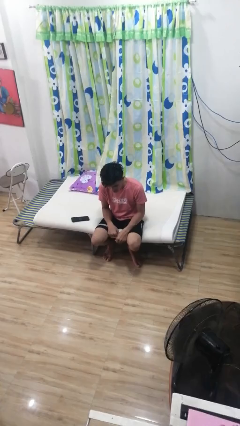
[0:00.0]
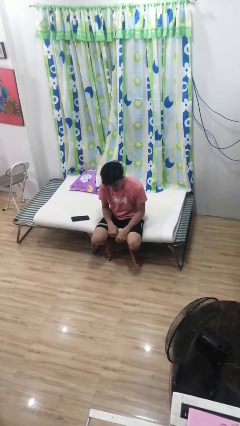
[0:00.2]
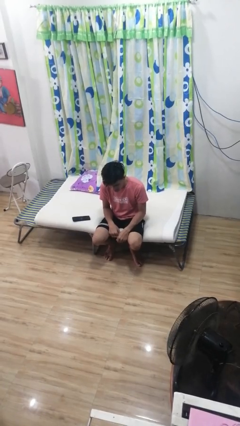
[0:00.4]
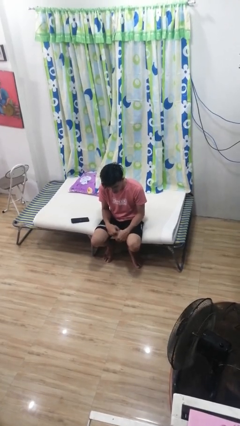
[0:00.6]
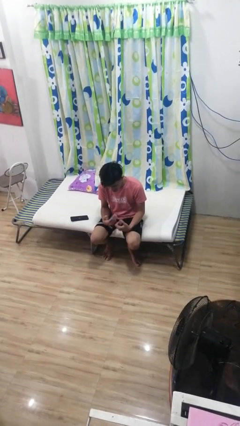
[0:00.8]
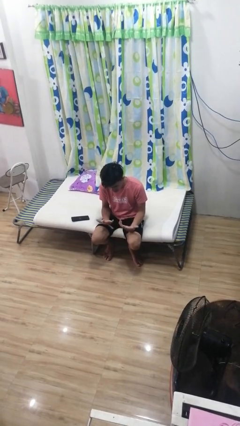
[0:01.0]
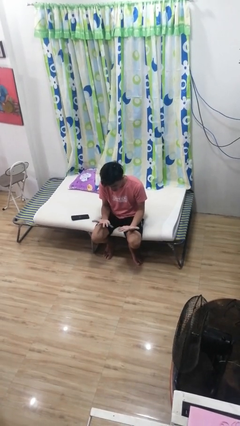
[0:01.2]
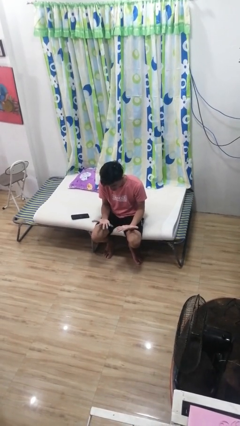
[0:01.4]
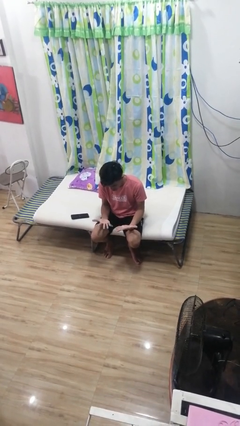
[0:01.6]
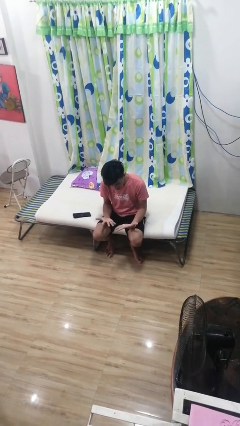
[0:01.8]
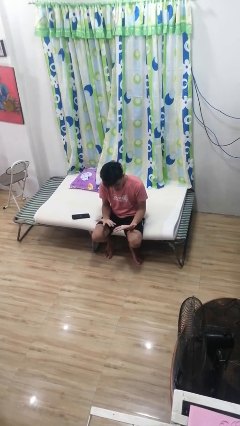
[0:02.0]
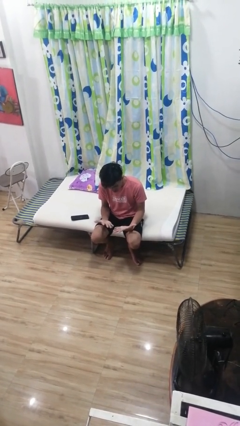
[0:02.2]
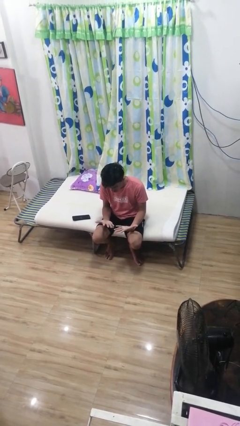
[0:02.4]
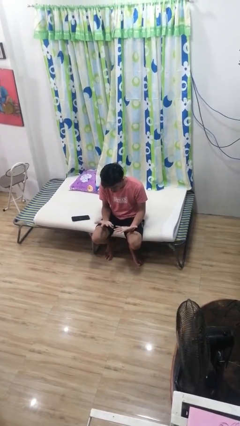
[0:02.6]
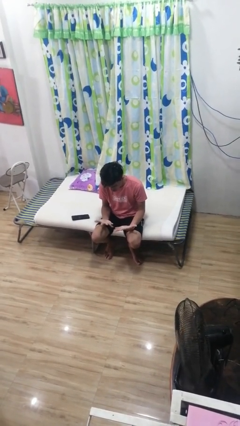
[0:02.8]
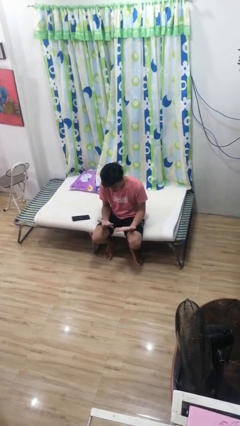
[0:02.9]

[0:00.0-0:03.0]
person looks at hands in lap

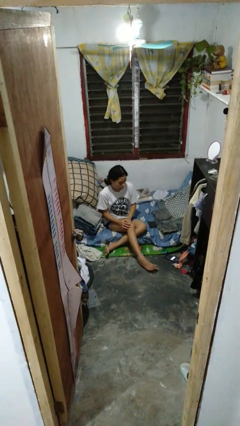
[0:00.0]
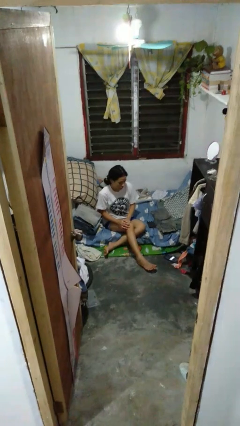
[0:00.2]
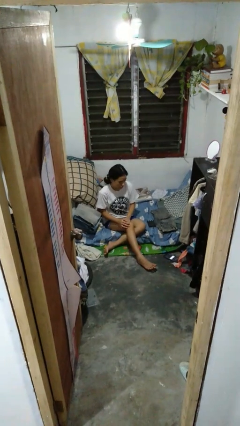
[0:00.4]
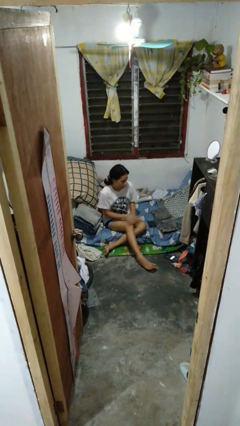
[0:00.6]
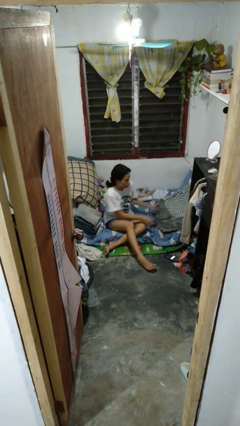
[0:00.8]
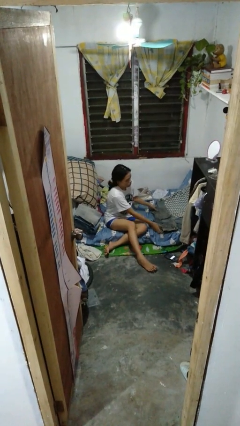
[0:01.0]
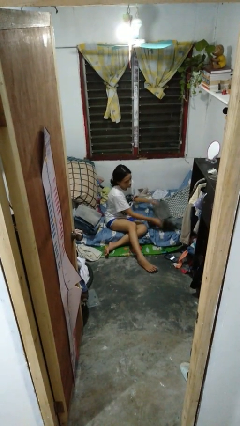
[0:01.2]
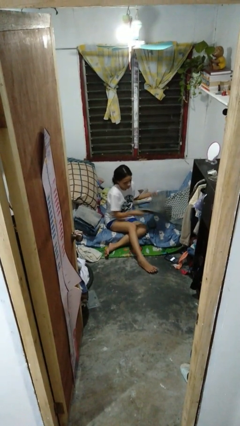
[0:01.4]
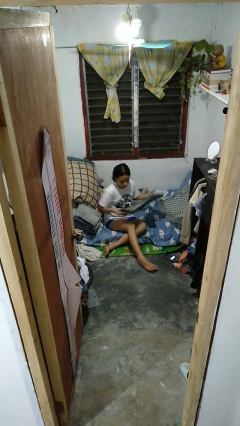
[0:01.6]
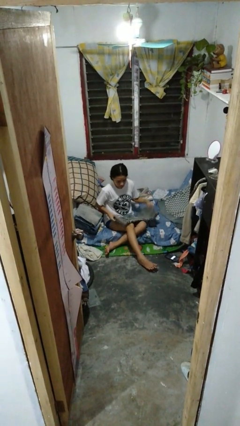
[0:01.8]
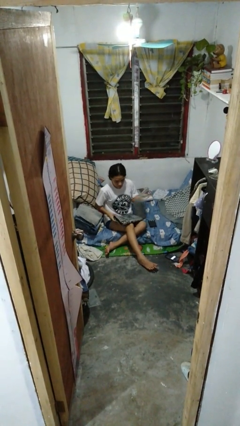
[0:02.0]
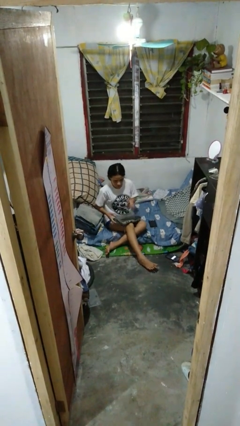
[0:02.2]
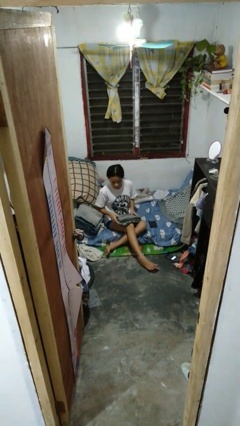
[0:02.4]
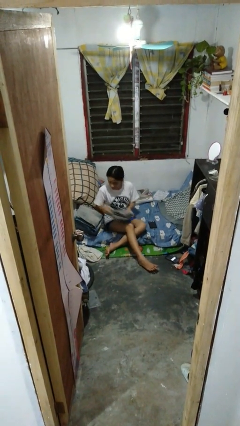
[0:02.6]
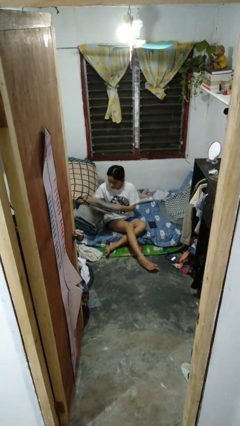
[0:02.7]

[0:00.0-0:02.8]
person folds pants

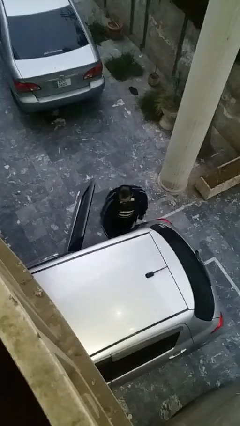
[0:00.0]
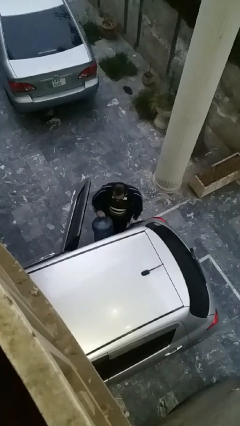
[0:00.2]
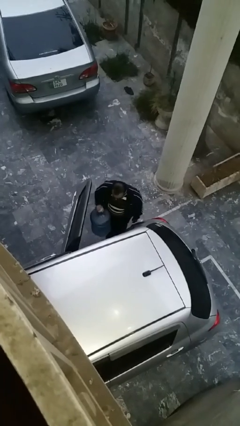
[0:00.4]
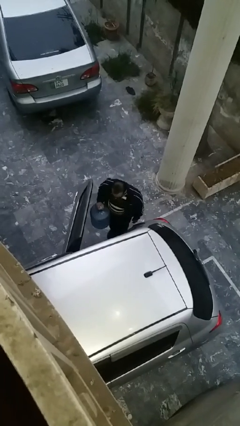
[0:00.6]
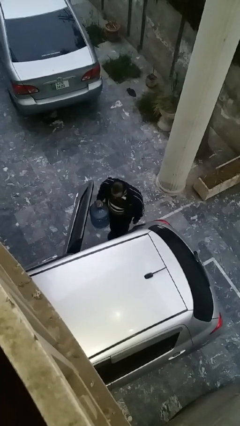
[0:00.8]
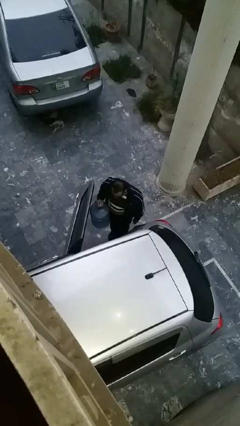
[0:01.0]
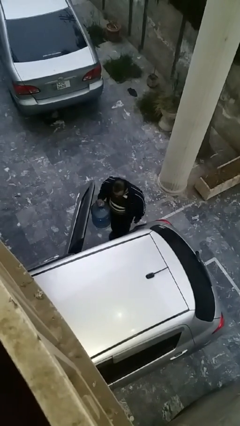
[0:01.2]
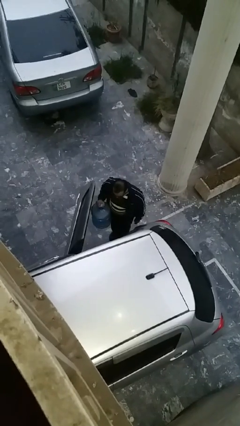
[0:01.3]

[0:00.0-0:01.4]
person unloads car

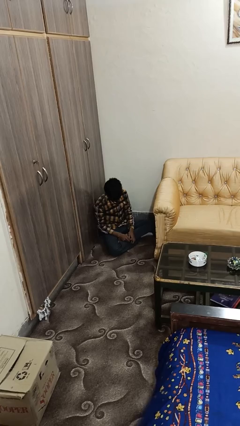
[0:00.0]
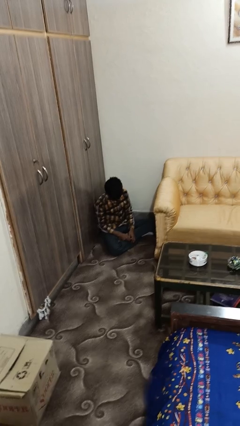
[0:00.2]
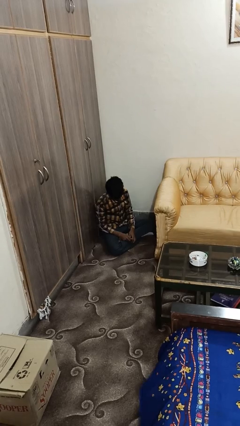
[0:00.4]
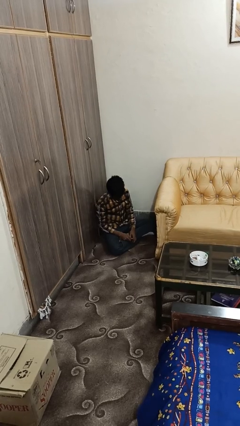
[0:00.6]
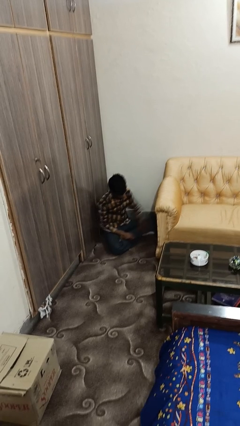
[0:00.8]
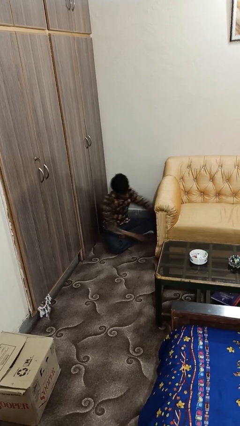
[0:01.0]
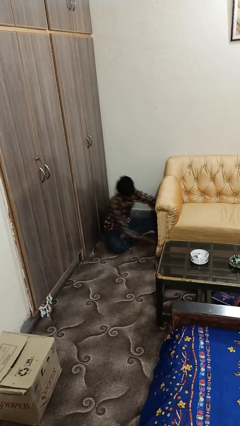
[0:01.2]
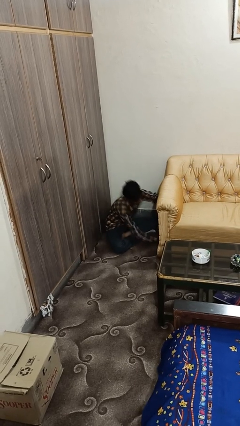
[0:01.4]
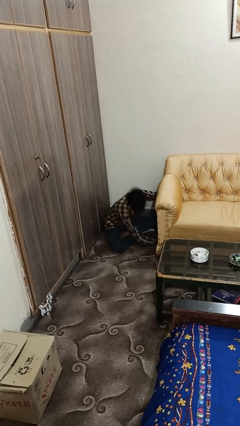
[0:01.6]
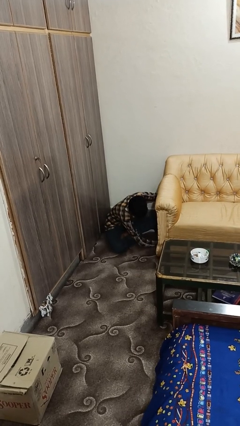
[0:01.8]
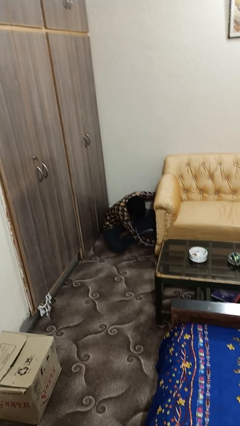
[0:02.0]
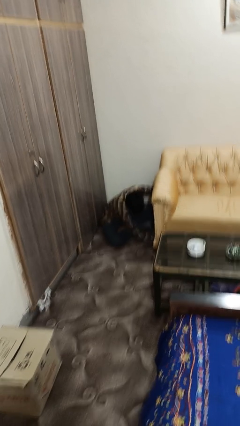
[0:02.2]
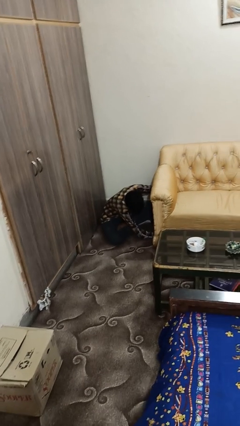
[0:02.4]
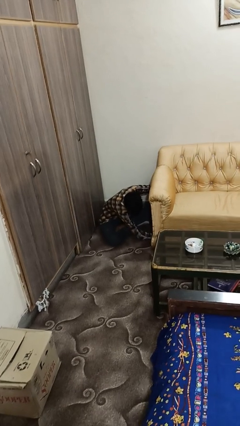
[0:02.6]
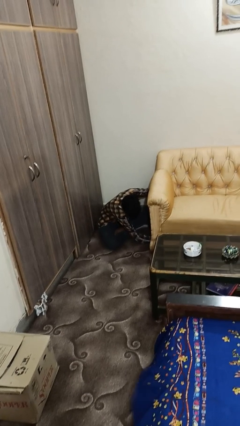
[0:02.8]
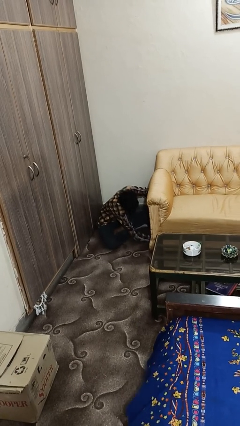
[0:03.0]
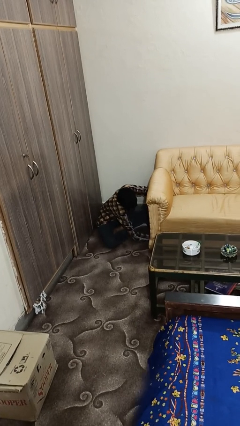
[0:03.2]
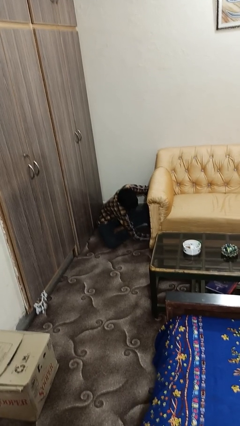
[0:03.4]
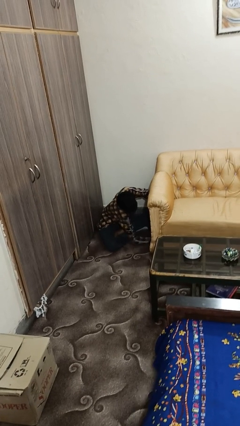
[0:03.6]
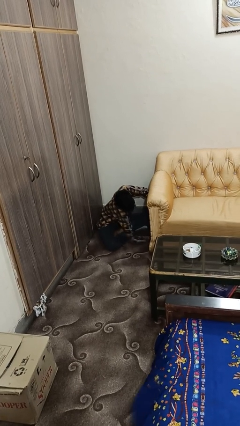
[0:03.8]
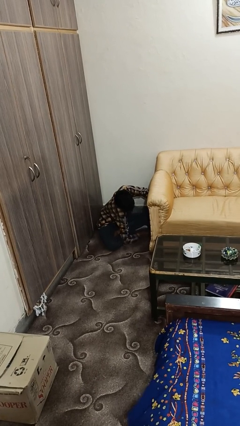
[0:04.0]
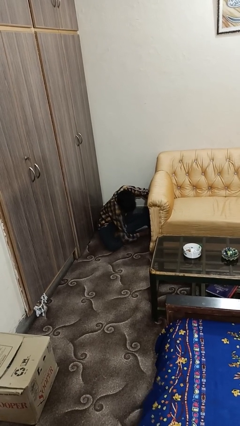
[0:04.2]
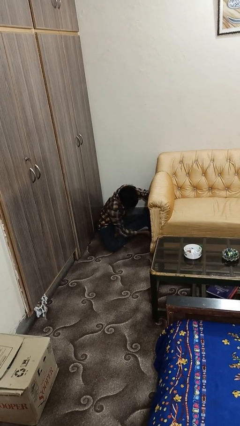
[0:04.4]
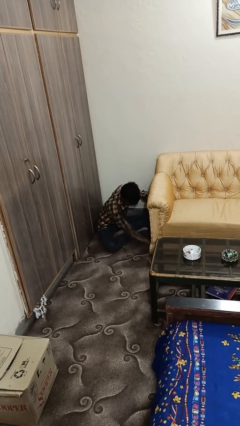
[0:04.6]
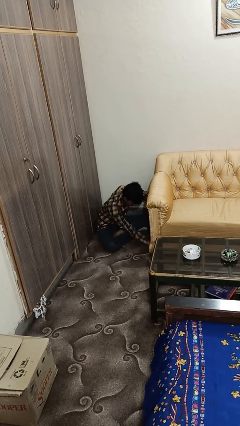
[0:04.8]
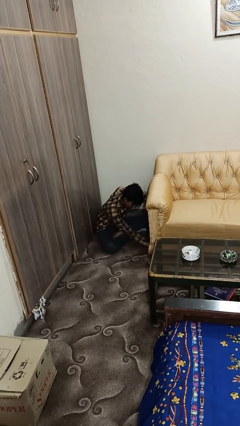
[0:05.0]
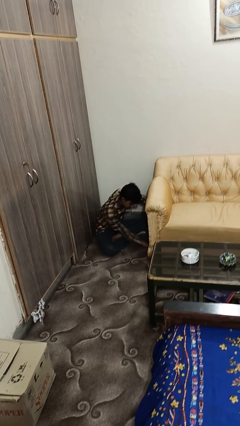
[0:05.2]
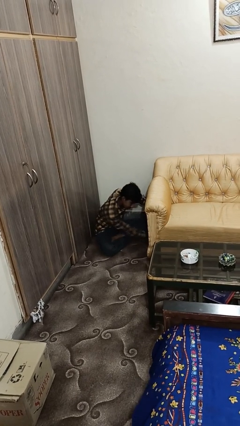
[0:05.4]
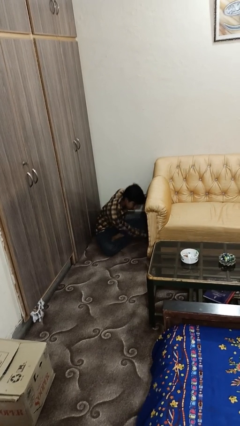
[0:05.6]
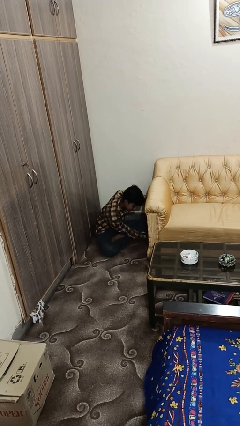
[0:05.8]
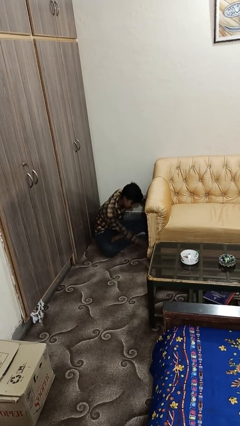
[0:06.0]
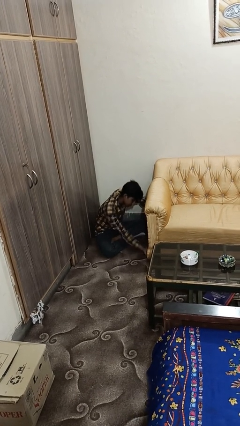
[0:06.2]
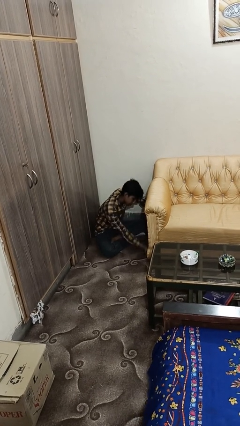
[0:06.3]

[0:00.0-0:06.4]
person searches under couch

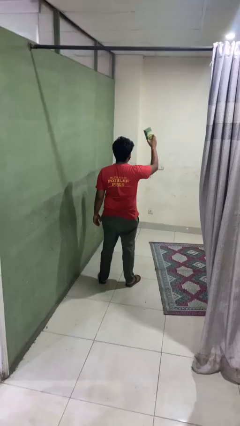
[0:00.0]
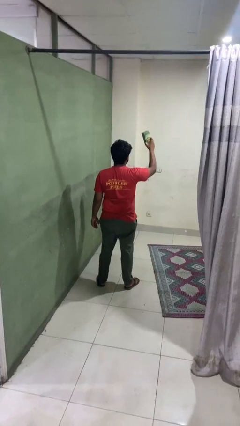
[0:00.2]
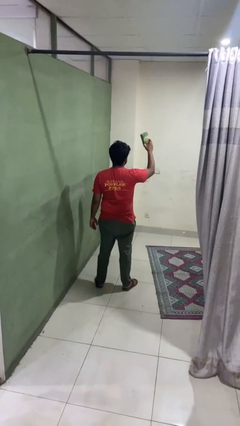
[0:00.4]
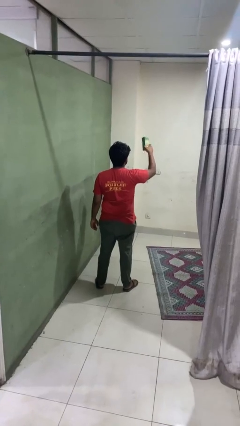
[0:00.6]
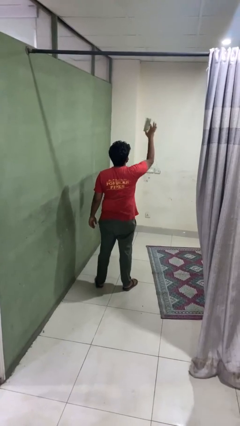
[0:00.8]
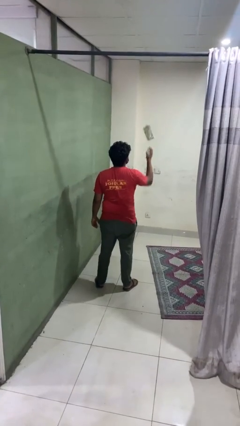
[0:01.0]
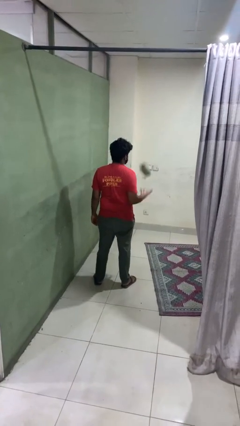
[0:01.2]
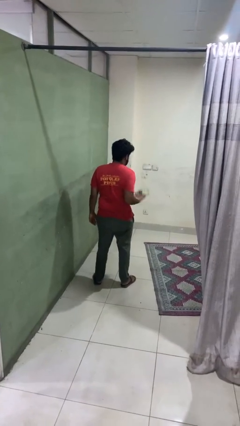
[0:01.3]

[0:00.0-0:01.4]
person drops object

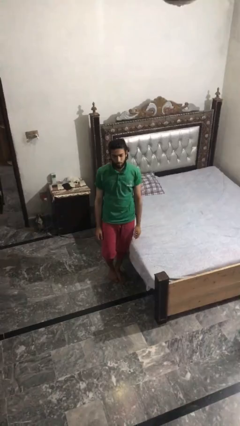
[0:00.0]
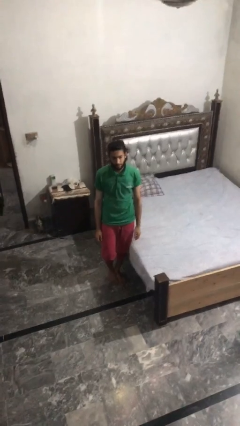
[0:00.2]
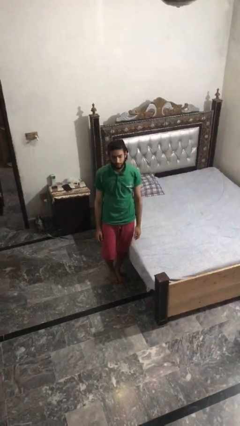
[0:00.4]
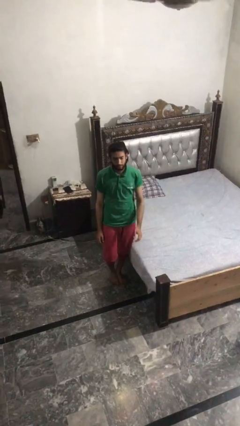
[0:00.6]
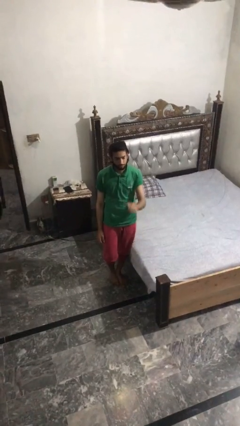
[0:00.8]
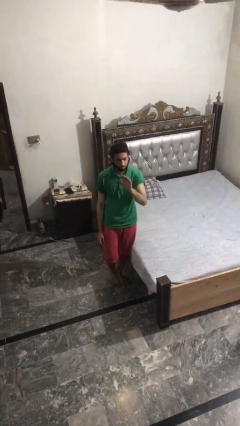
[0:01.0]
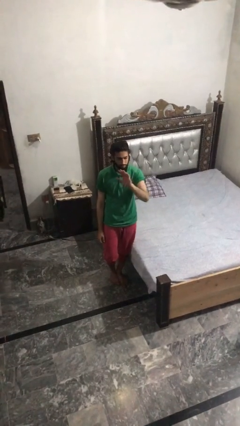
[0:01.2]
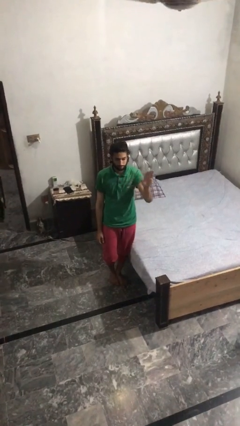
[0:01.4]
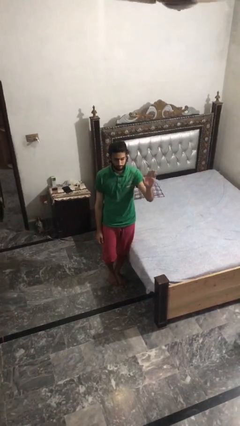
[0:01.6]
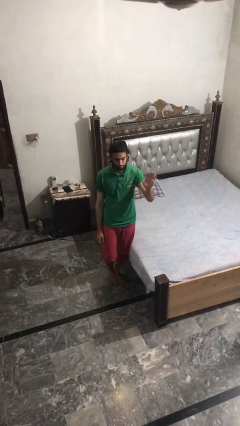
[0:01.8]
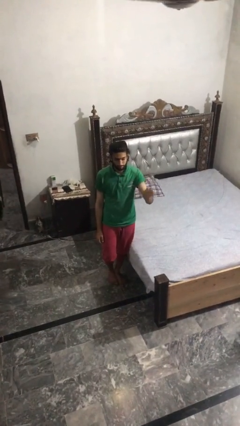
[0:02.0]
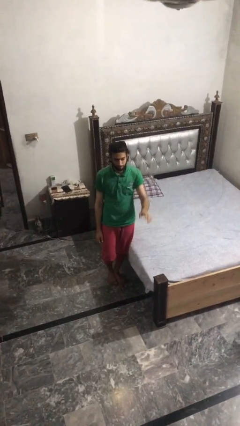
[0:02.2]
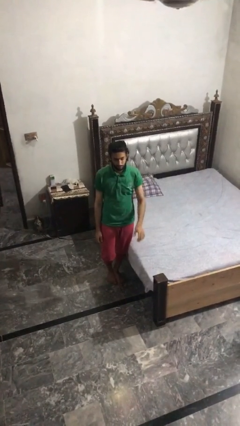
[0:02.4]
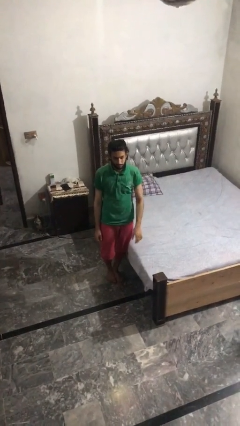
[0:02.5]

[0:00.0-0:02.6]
person gestures swipe right
